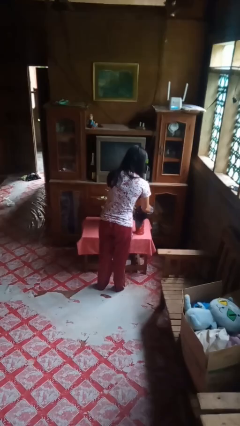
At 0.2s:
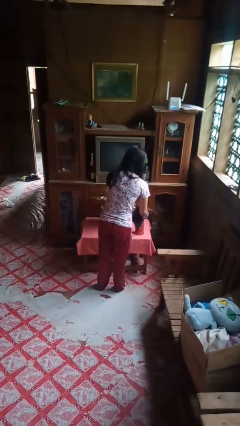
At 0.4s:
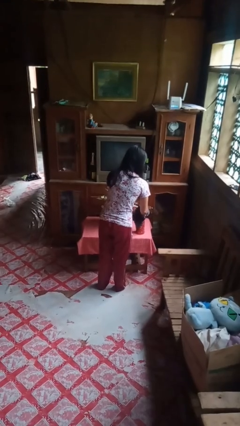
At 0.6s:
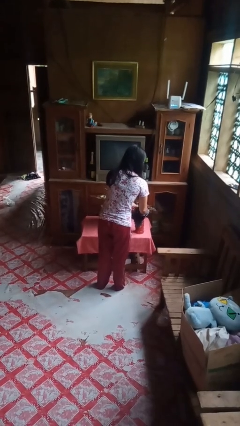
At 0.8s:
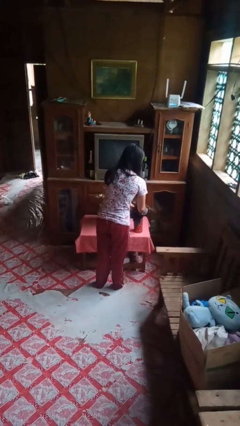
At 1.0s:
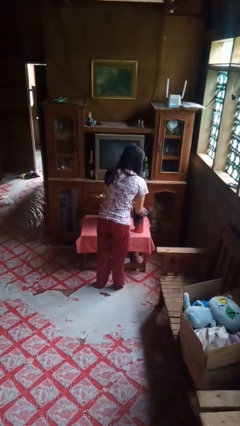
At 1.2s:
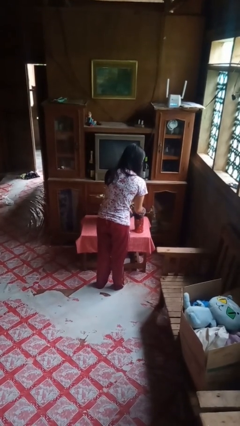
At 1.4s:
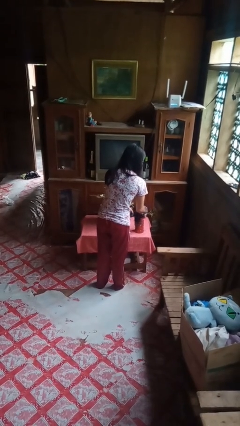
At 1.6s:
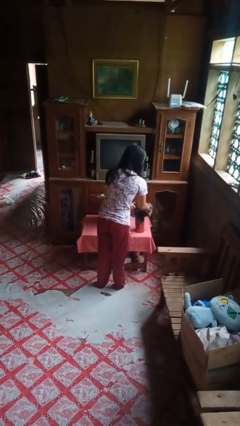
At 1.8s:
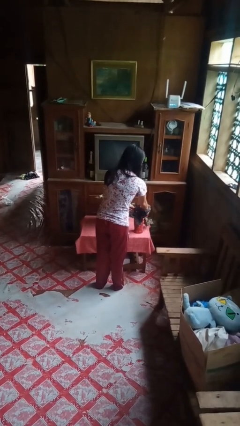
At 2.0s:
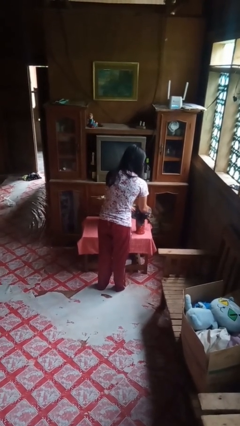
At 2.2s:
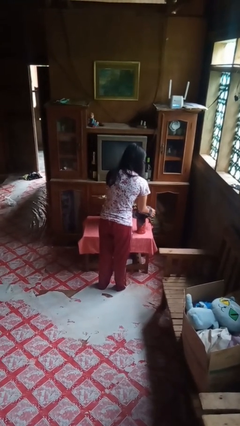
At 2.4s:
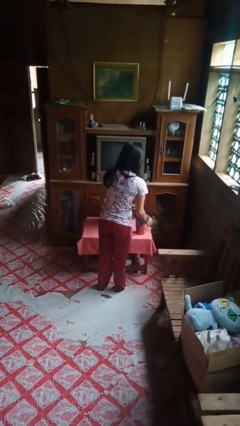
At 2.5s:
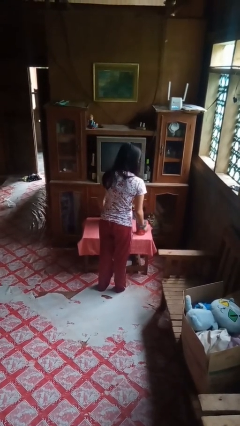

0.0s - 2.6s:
person arranges flowers in vase

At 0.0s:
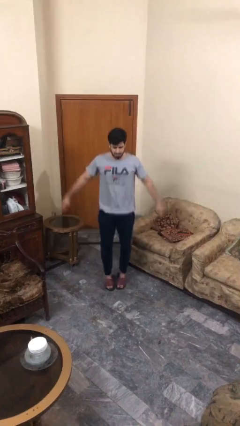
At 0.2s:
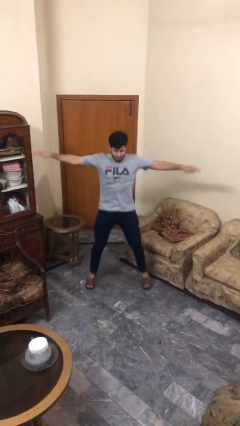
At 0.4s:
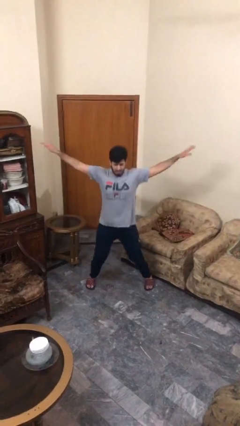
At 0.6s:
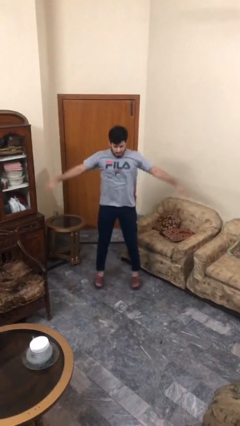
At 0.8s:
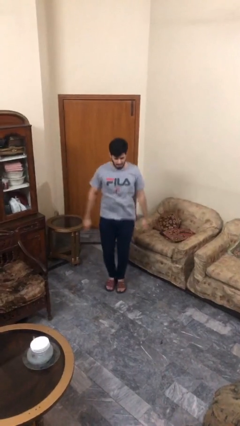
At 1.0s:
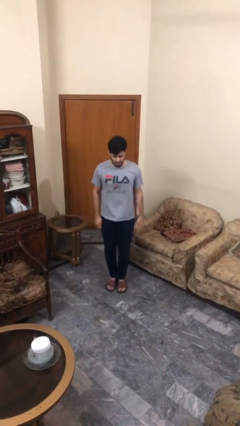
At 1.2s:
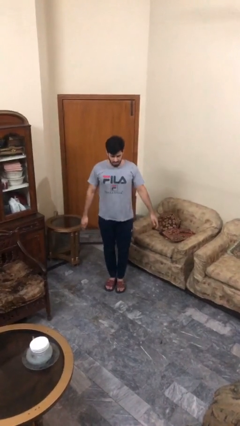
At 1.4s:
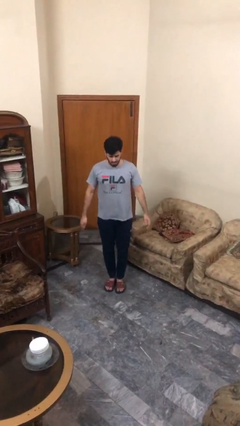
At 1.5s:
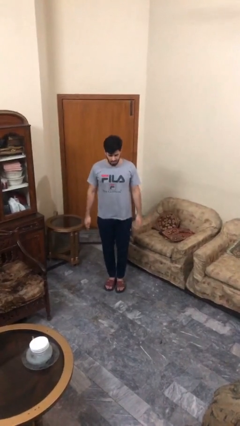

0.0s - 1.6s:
person exercises with jumping jacks

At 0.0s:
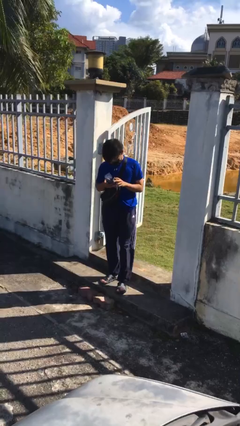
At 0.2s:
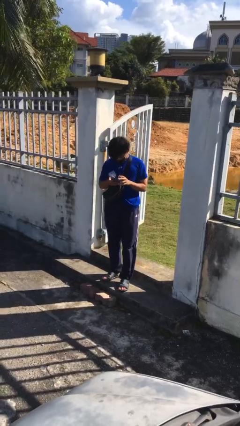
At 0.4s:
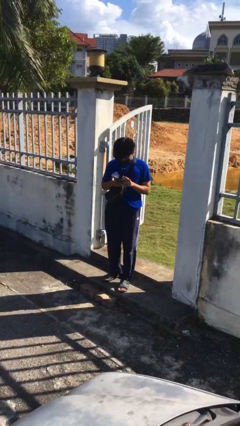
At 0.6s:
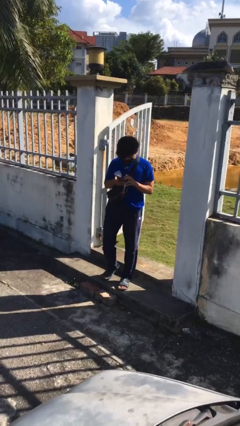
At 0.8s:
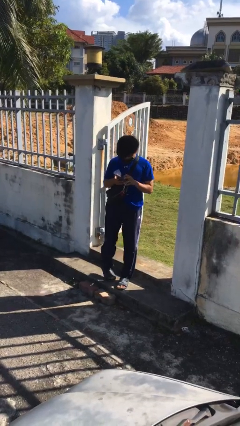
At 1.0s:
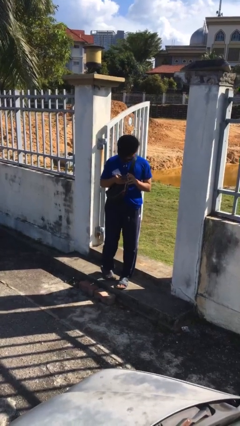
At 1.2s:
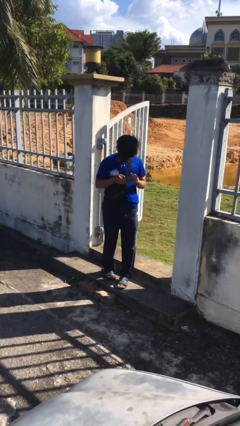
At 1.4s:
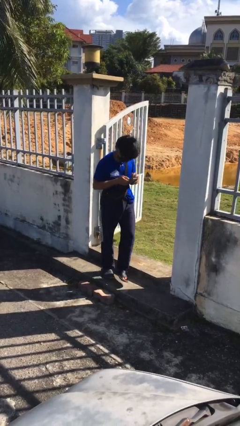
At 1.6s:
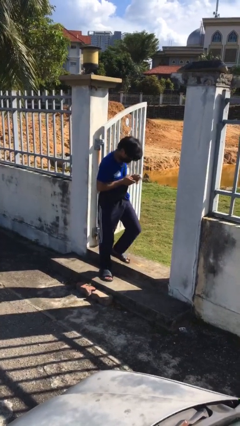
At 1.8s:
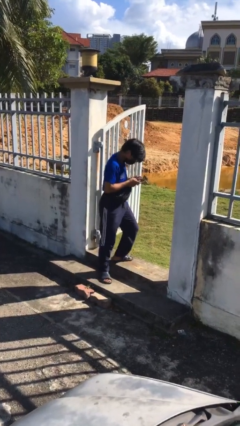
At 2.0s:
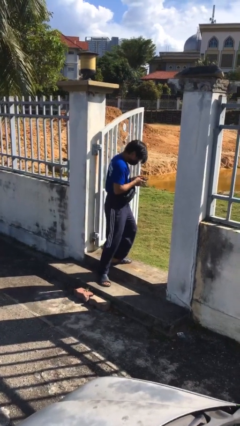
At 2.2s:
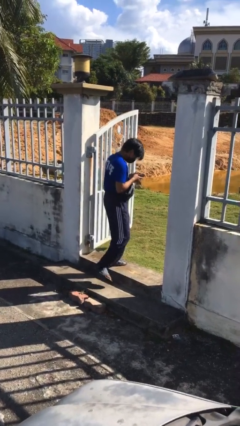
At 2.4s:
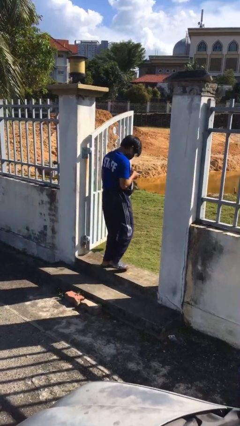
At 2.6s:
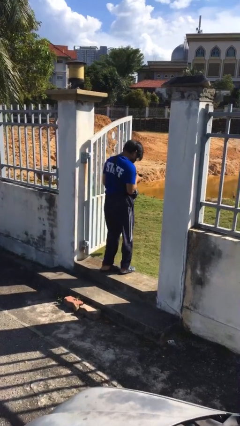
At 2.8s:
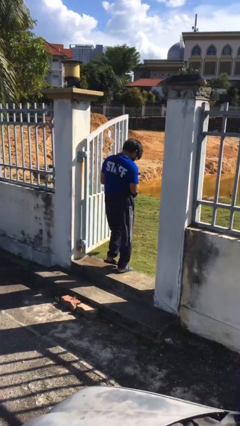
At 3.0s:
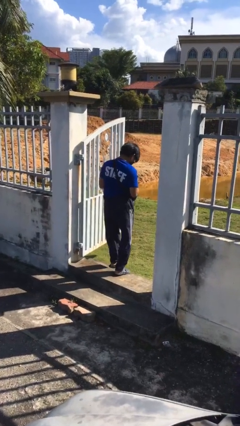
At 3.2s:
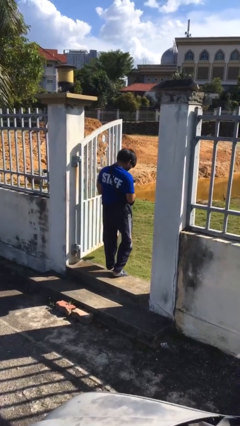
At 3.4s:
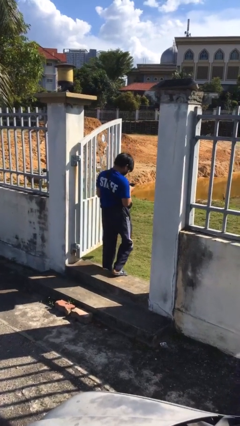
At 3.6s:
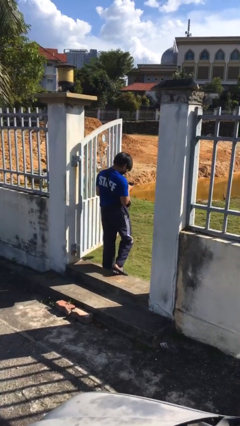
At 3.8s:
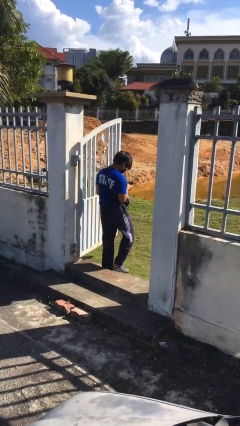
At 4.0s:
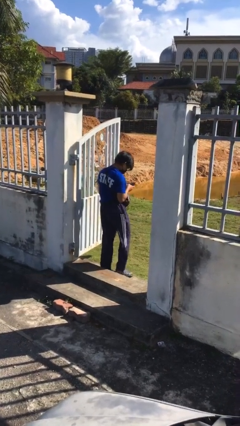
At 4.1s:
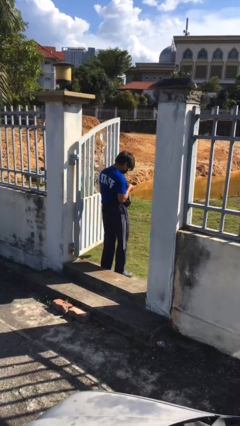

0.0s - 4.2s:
person exits scene through structure

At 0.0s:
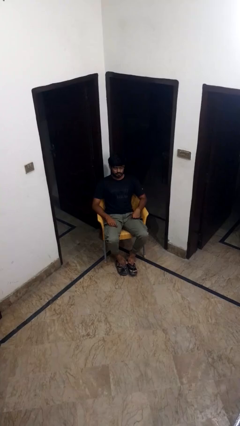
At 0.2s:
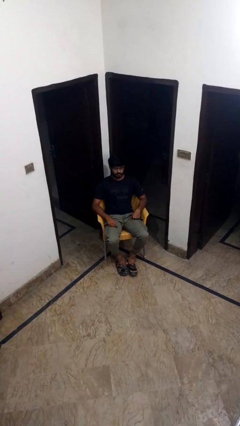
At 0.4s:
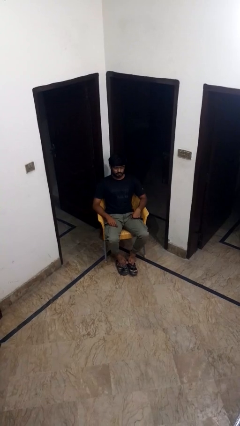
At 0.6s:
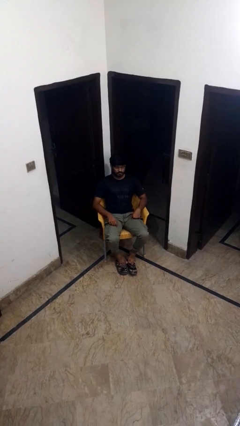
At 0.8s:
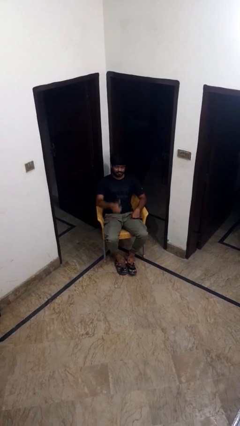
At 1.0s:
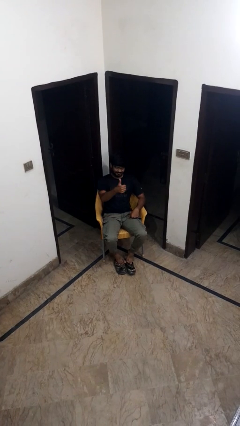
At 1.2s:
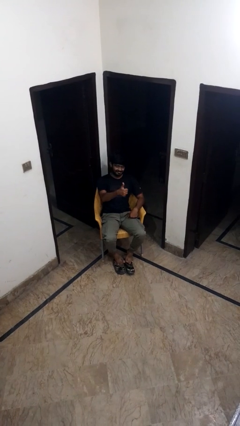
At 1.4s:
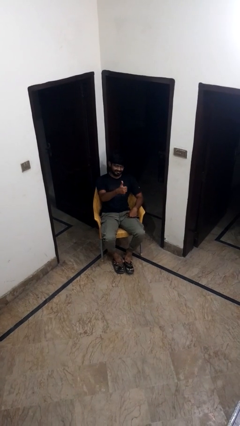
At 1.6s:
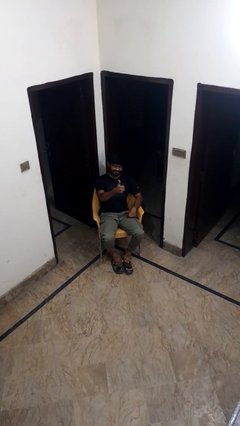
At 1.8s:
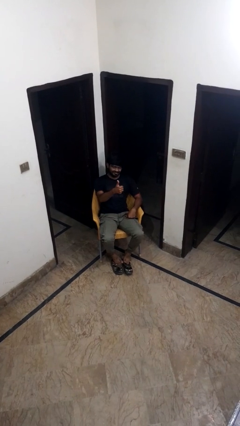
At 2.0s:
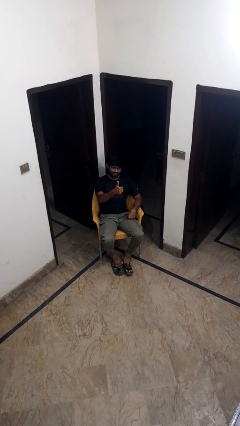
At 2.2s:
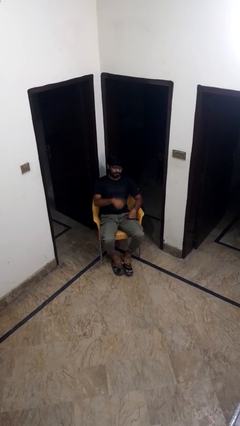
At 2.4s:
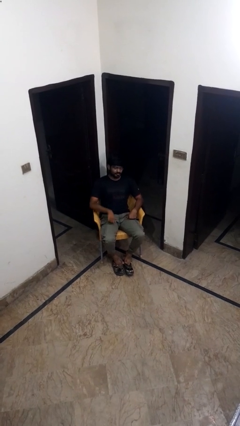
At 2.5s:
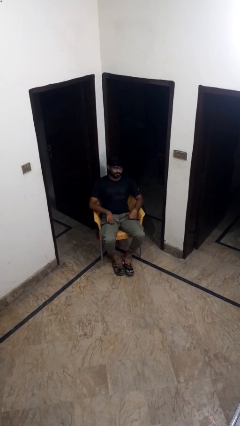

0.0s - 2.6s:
person gestures thumbs up

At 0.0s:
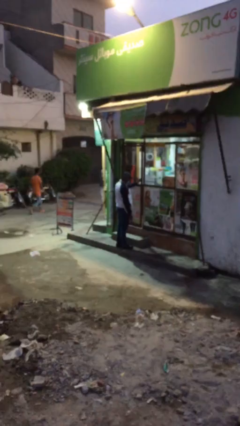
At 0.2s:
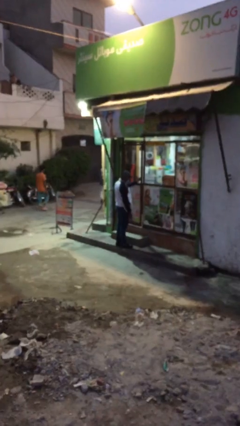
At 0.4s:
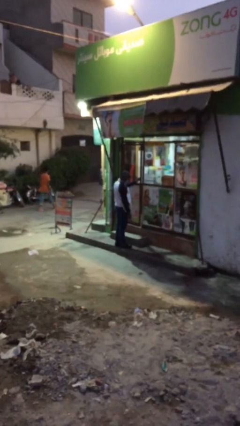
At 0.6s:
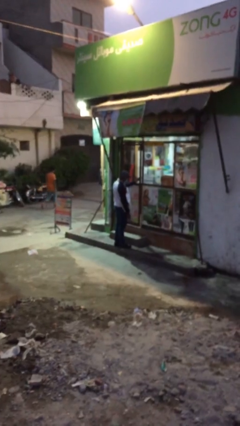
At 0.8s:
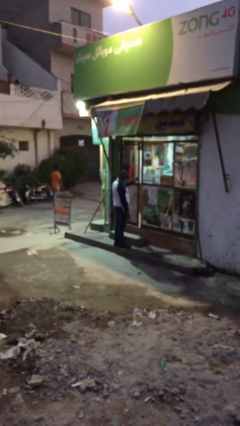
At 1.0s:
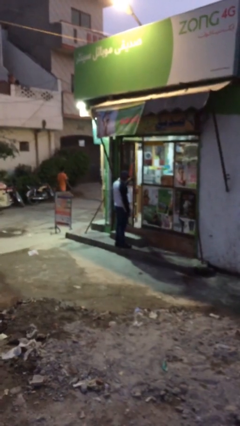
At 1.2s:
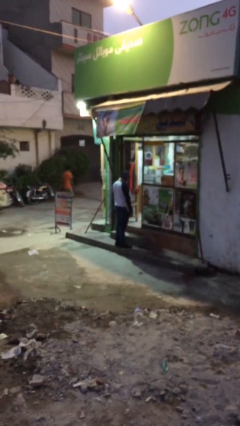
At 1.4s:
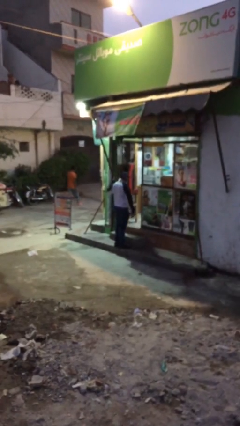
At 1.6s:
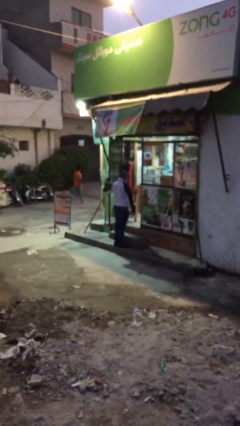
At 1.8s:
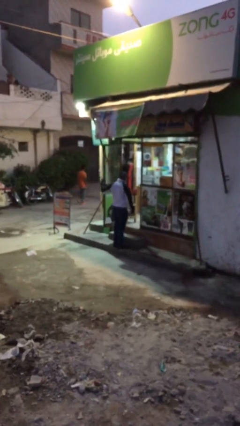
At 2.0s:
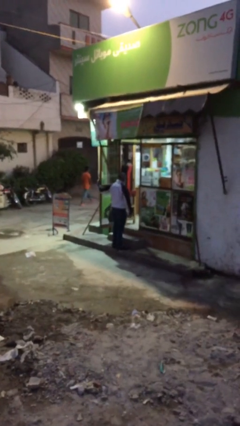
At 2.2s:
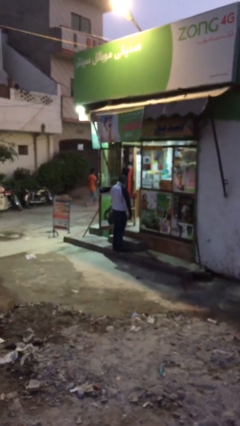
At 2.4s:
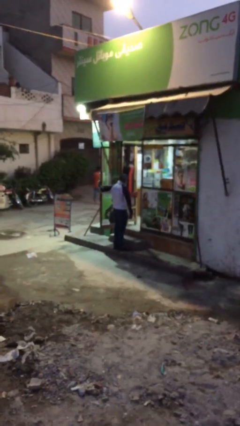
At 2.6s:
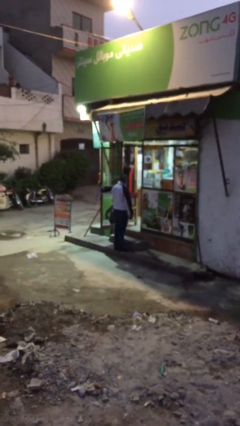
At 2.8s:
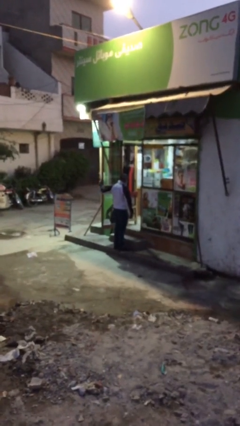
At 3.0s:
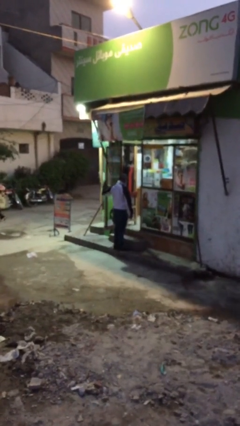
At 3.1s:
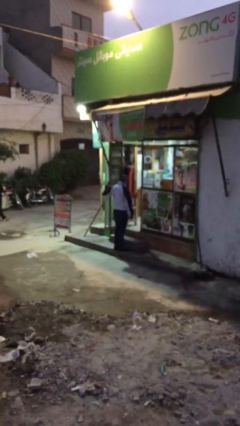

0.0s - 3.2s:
person opens facility door

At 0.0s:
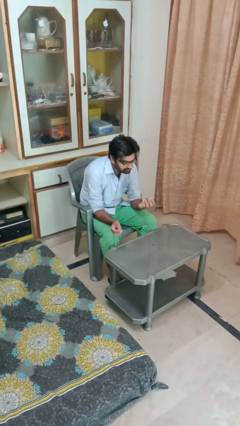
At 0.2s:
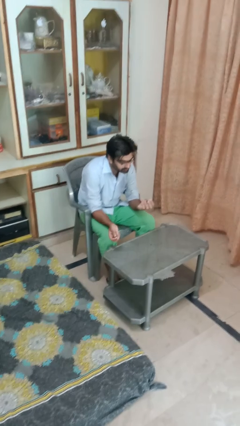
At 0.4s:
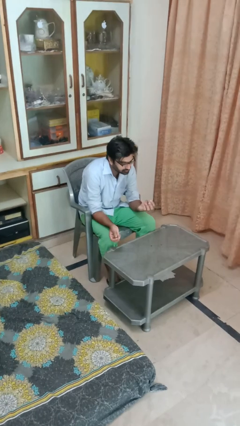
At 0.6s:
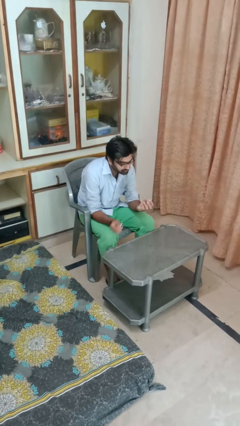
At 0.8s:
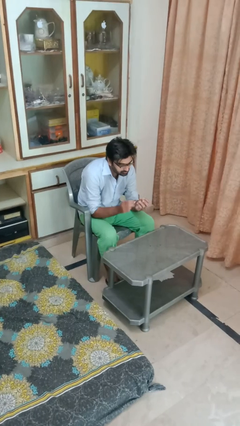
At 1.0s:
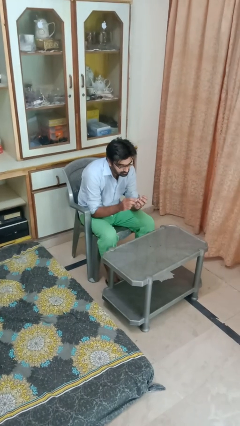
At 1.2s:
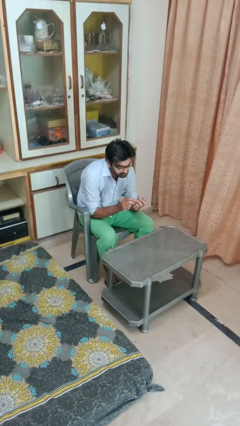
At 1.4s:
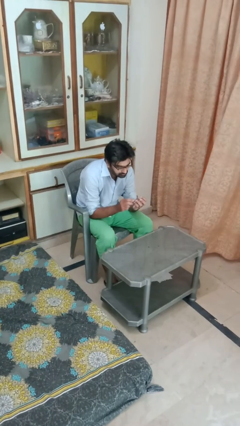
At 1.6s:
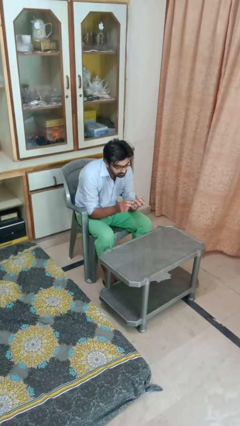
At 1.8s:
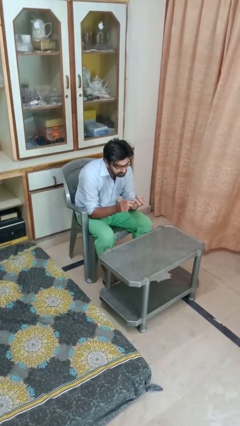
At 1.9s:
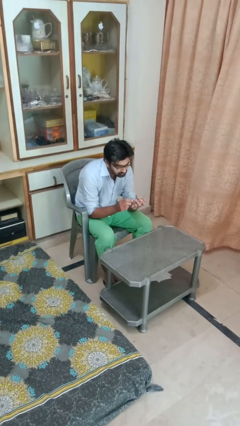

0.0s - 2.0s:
person files fingernails

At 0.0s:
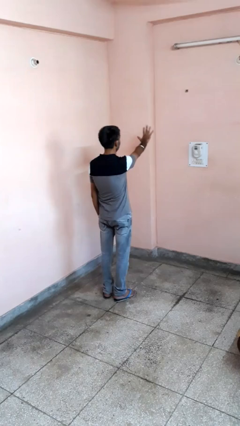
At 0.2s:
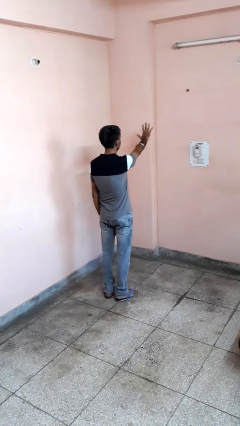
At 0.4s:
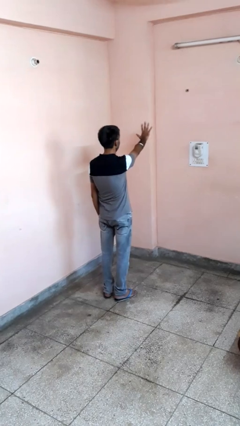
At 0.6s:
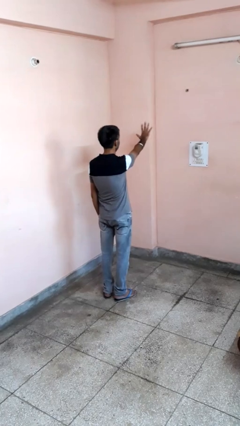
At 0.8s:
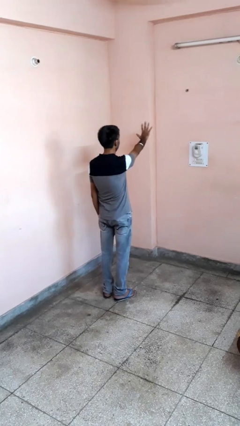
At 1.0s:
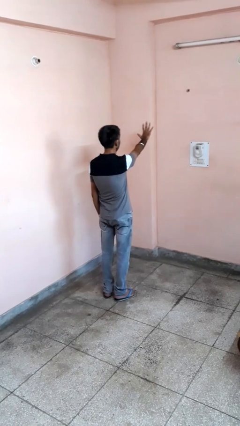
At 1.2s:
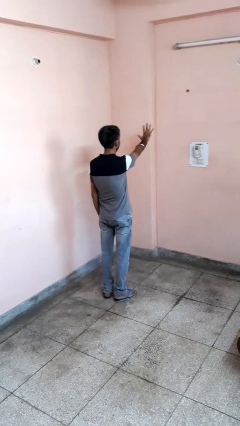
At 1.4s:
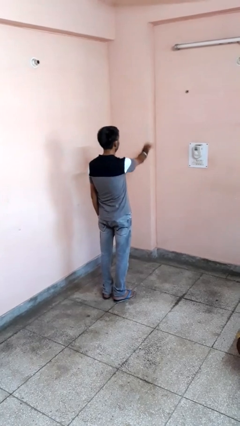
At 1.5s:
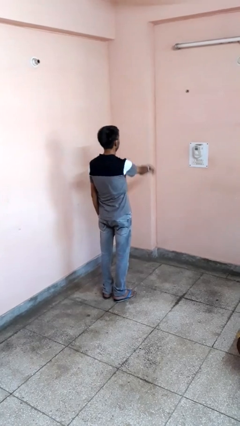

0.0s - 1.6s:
person gestures number five
